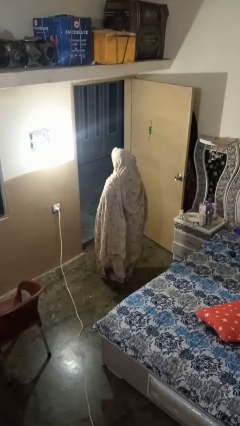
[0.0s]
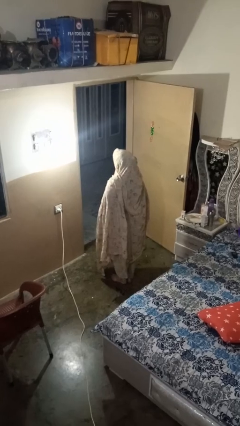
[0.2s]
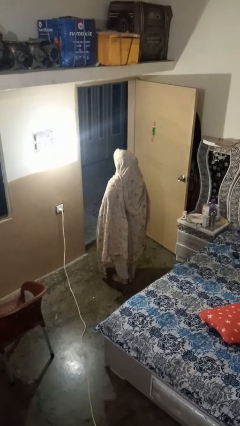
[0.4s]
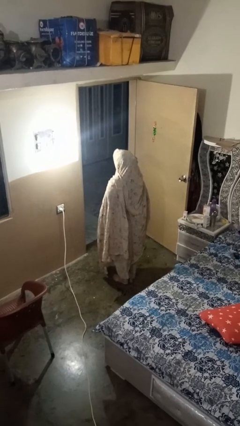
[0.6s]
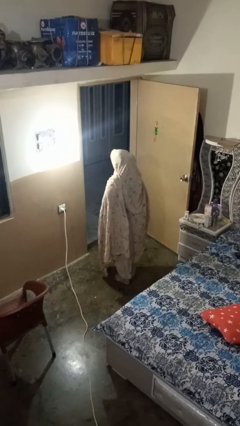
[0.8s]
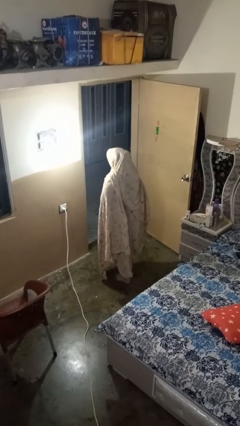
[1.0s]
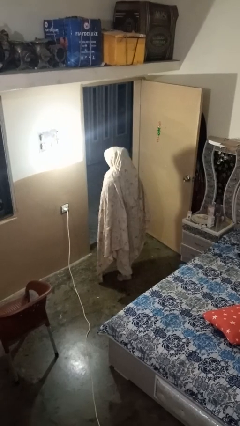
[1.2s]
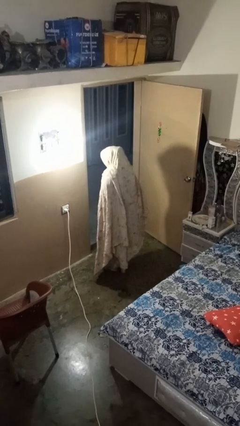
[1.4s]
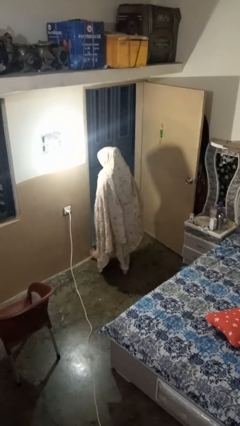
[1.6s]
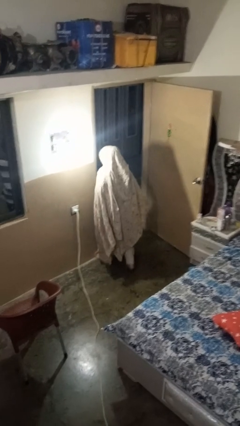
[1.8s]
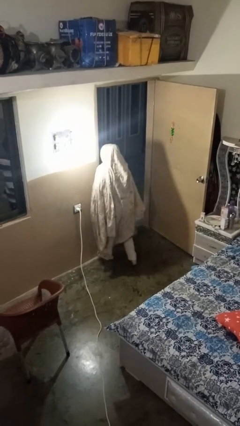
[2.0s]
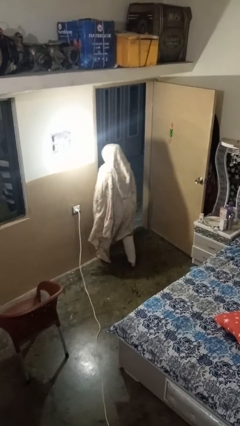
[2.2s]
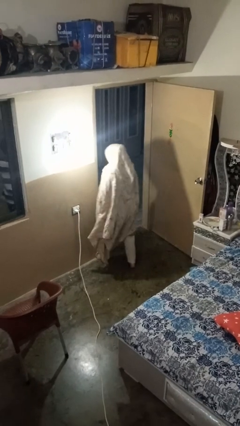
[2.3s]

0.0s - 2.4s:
person bumps into wall

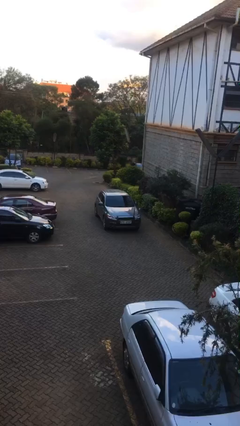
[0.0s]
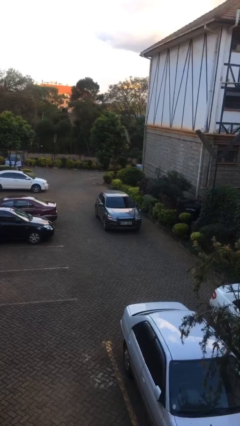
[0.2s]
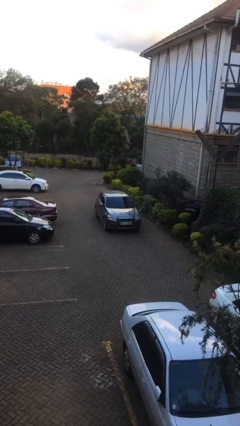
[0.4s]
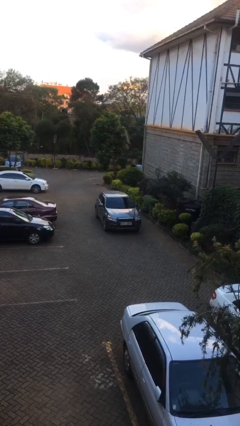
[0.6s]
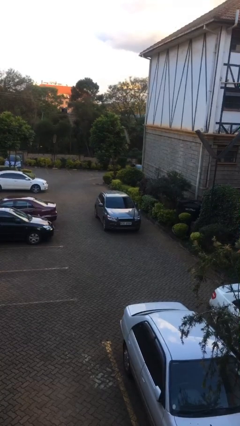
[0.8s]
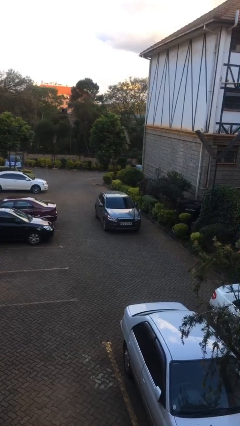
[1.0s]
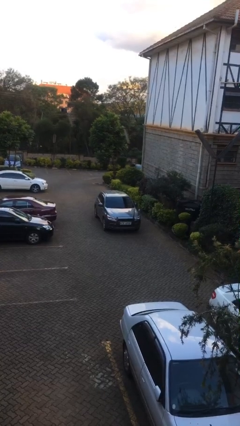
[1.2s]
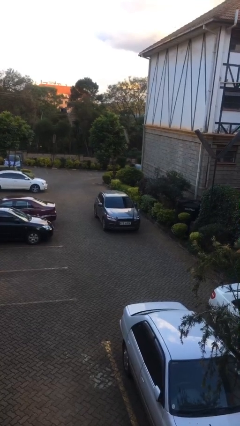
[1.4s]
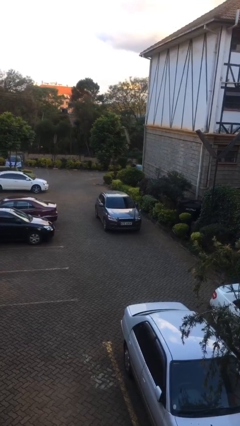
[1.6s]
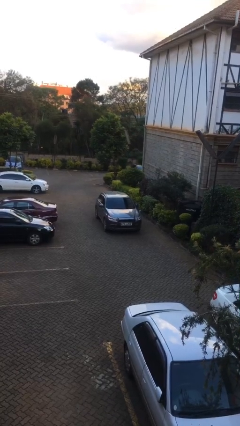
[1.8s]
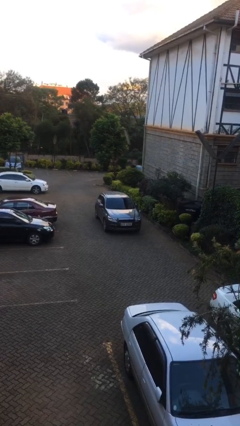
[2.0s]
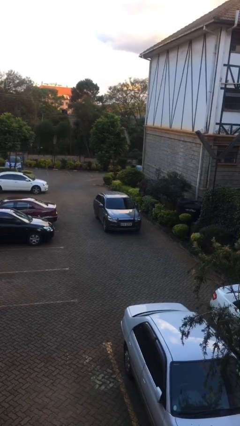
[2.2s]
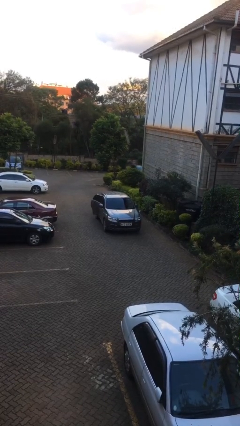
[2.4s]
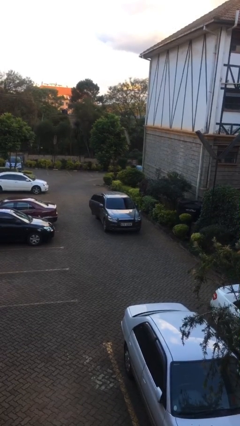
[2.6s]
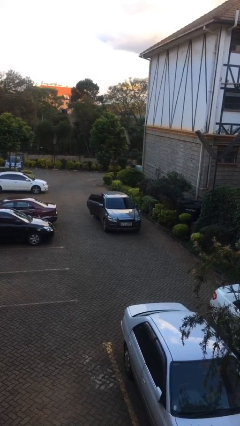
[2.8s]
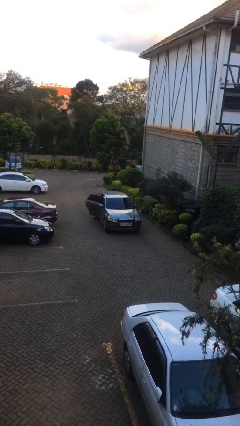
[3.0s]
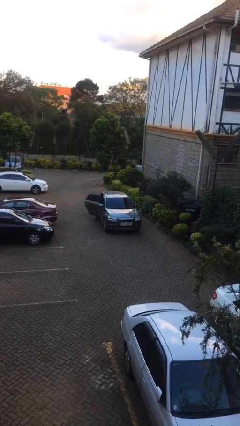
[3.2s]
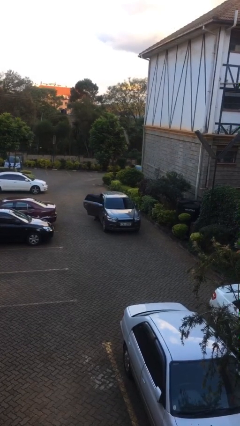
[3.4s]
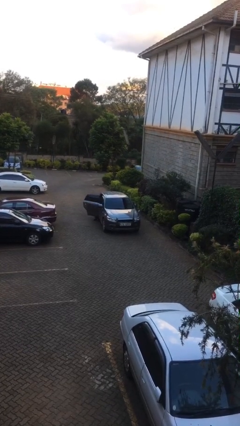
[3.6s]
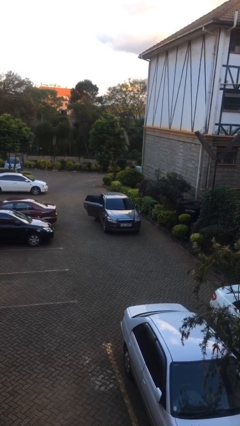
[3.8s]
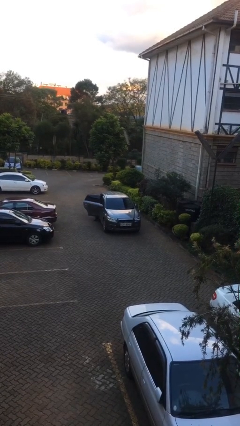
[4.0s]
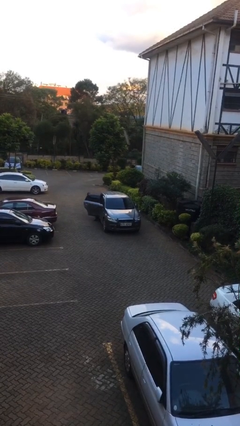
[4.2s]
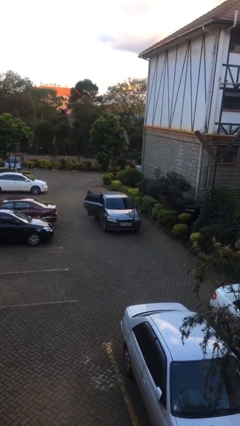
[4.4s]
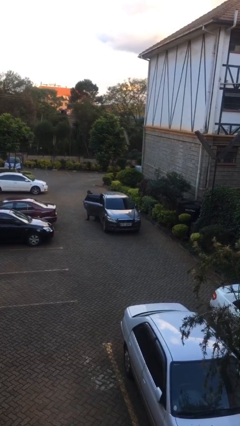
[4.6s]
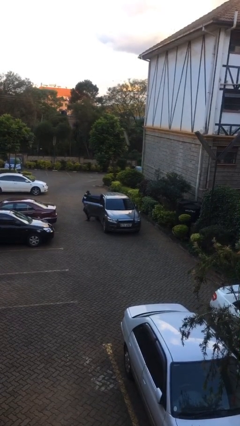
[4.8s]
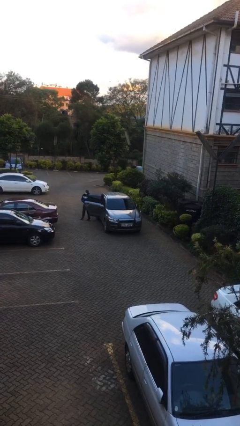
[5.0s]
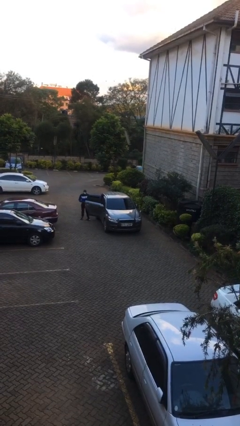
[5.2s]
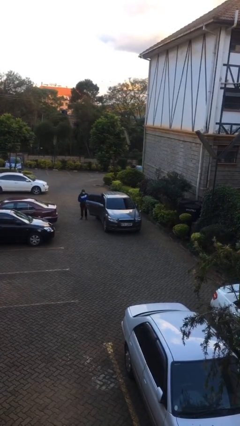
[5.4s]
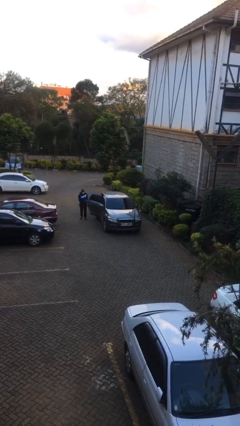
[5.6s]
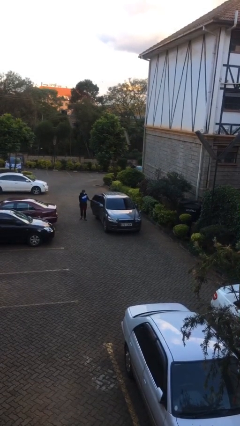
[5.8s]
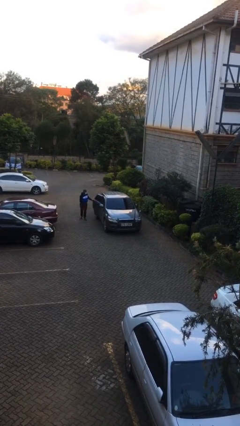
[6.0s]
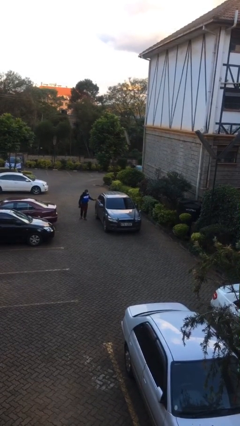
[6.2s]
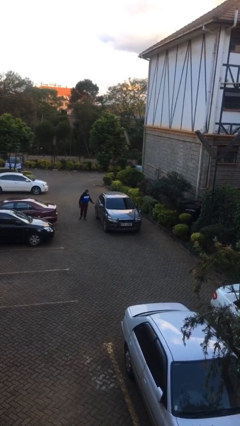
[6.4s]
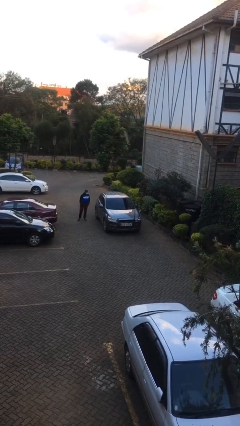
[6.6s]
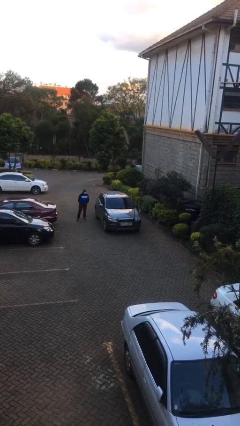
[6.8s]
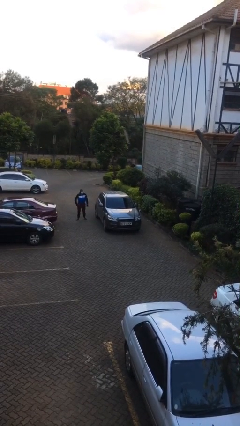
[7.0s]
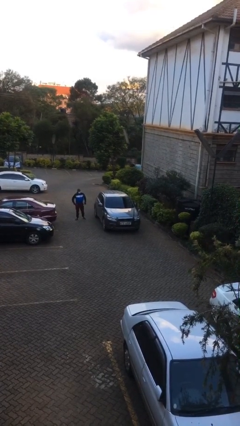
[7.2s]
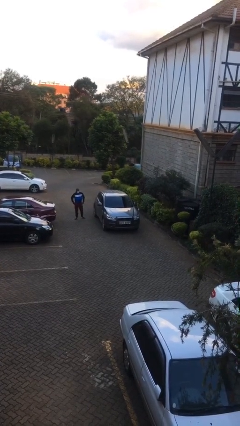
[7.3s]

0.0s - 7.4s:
car drops off person

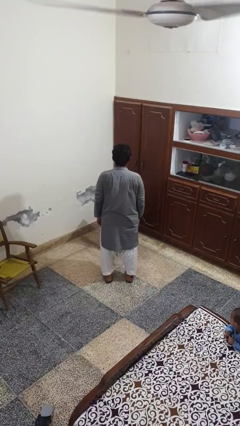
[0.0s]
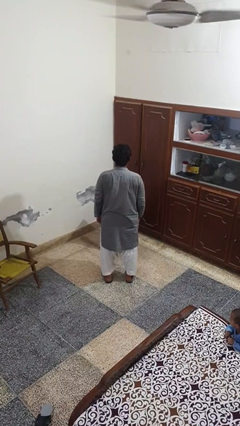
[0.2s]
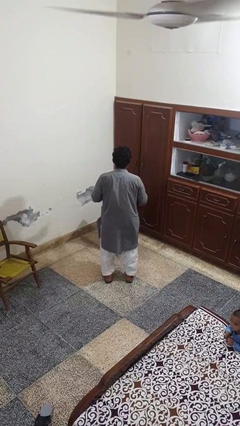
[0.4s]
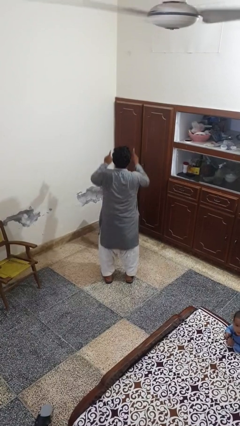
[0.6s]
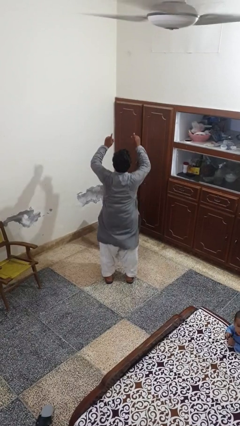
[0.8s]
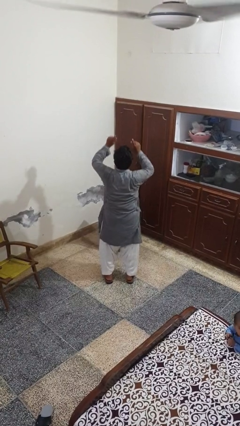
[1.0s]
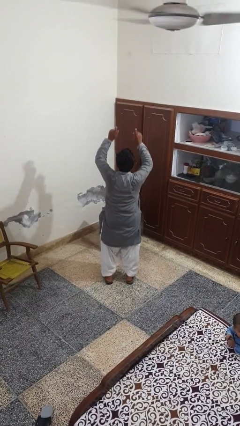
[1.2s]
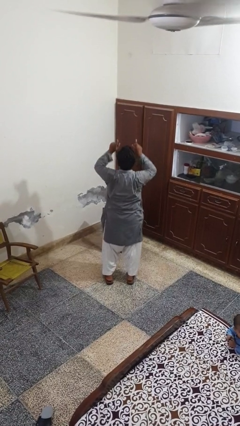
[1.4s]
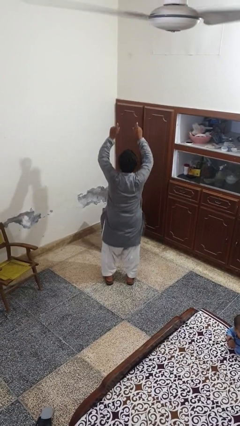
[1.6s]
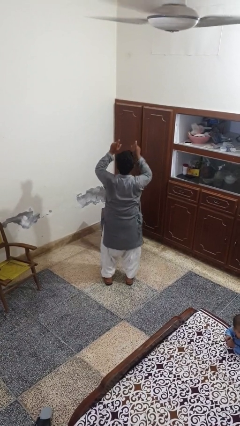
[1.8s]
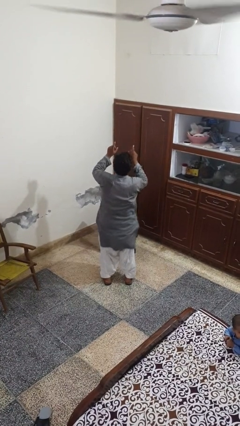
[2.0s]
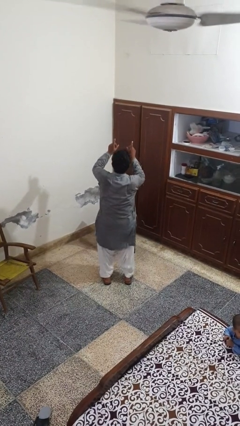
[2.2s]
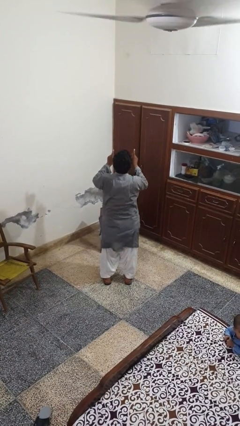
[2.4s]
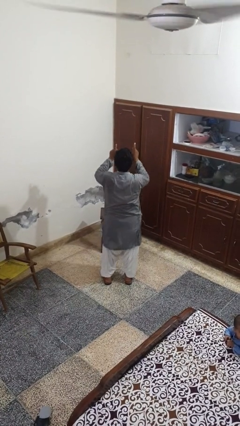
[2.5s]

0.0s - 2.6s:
person dances in place

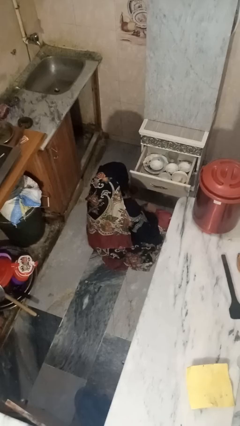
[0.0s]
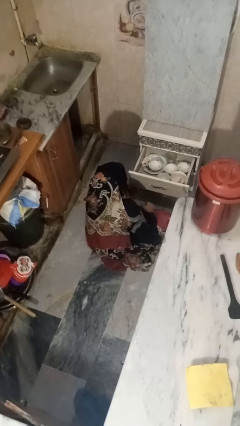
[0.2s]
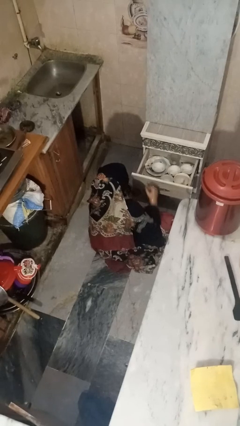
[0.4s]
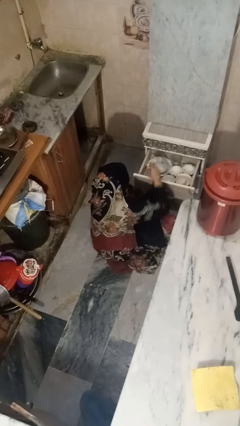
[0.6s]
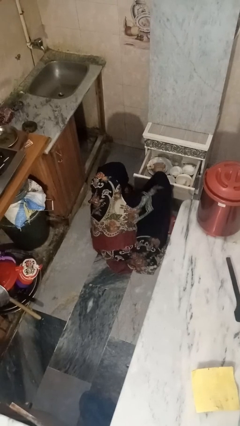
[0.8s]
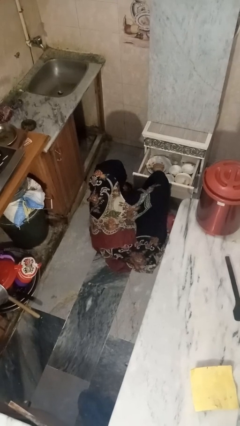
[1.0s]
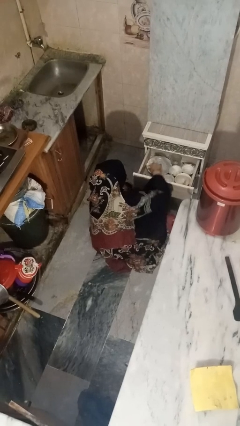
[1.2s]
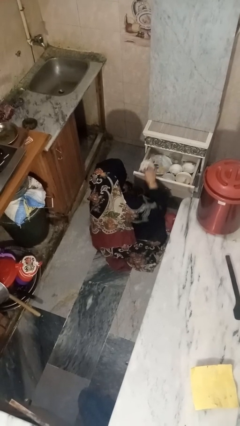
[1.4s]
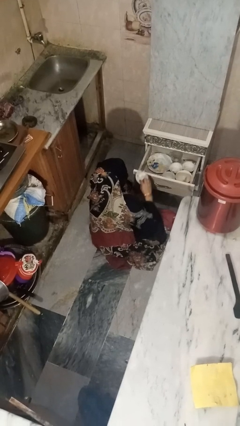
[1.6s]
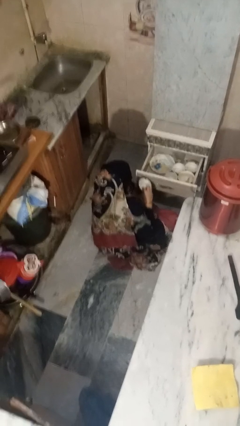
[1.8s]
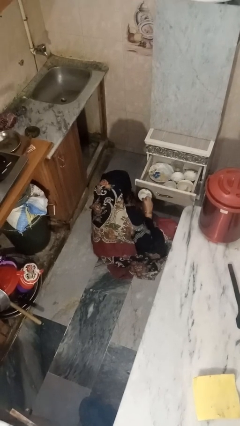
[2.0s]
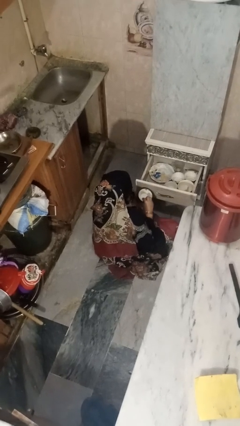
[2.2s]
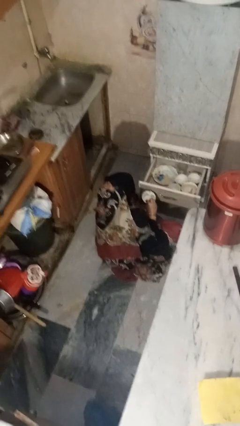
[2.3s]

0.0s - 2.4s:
person takes object from kitchen drawer

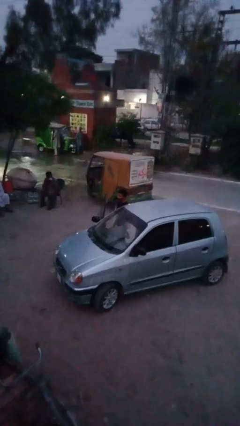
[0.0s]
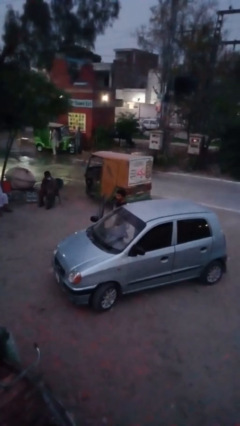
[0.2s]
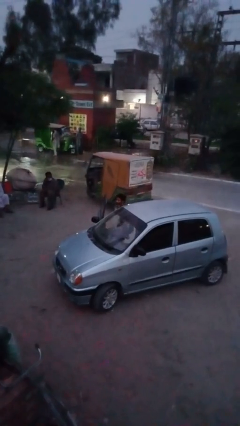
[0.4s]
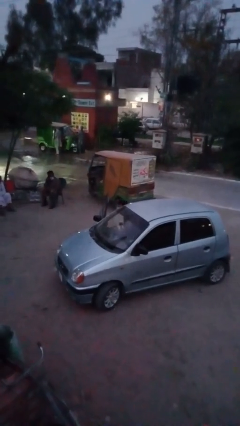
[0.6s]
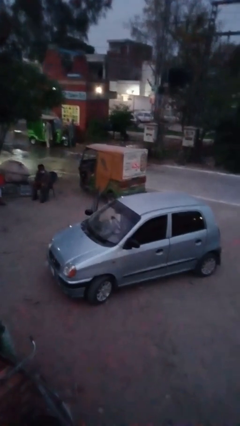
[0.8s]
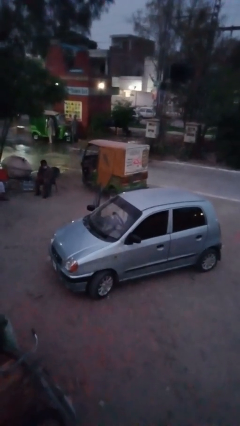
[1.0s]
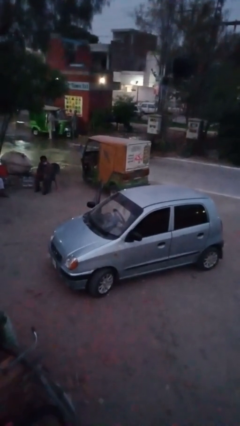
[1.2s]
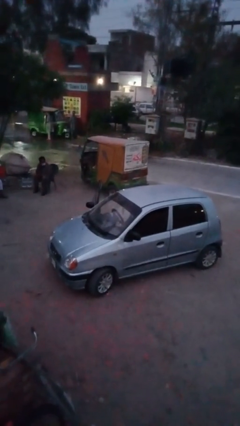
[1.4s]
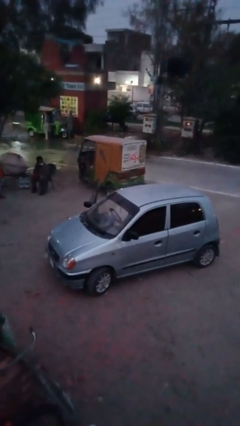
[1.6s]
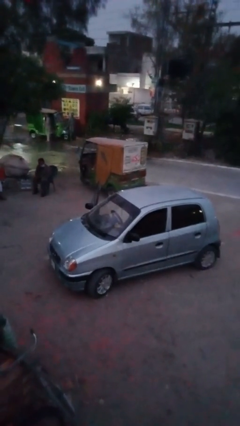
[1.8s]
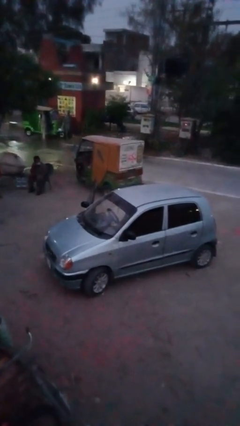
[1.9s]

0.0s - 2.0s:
person enters car

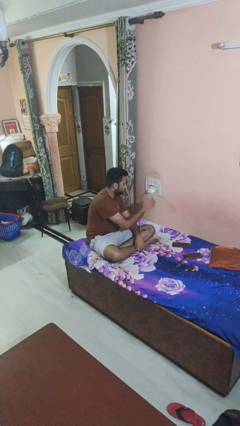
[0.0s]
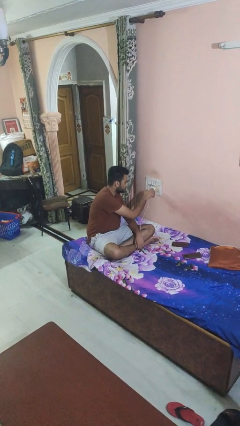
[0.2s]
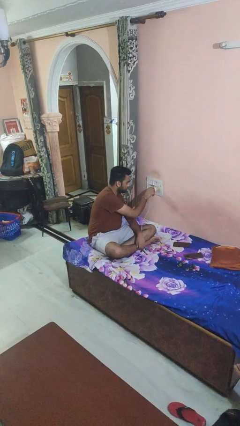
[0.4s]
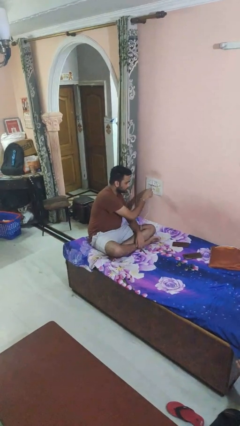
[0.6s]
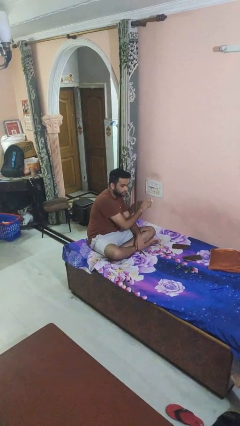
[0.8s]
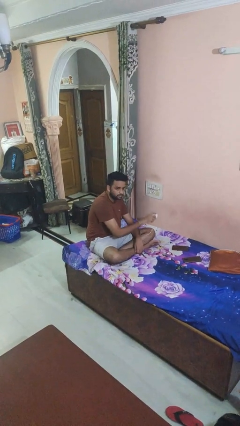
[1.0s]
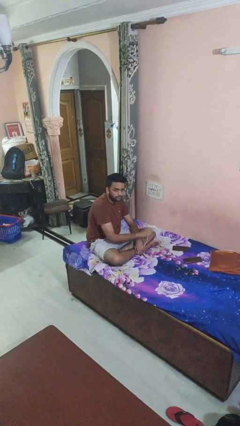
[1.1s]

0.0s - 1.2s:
person unplugs from electrical socket
